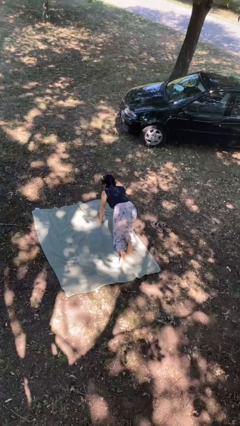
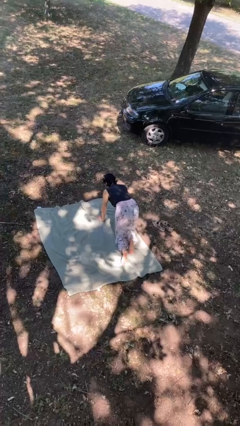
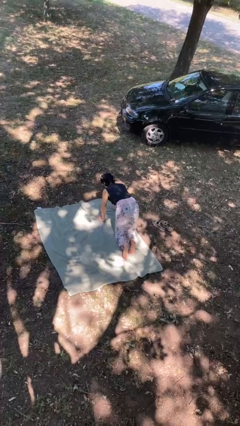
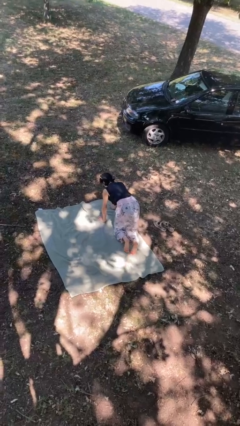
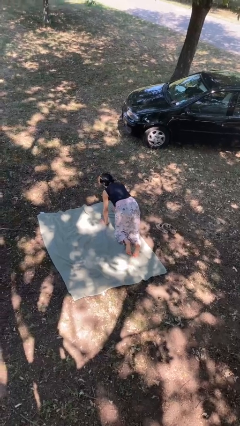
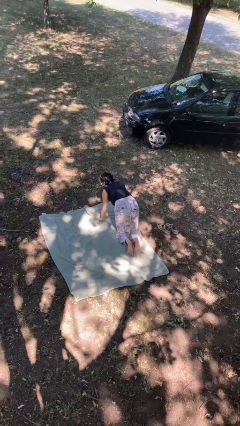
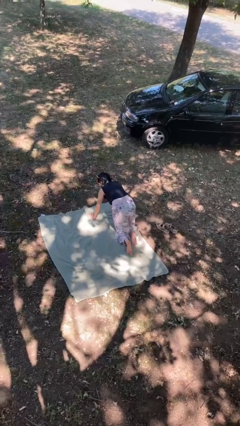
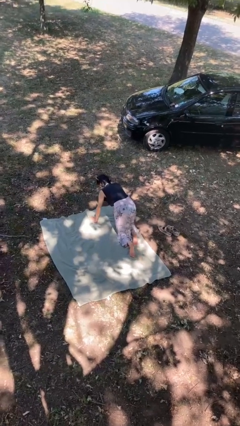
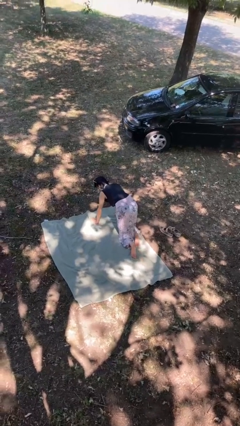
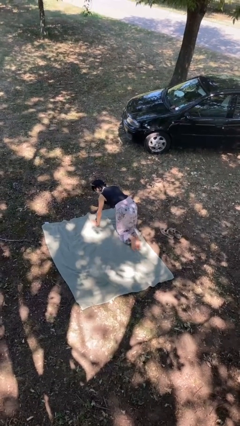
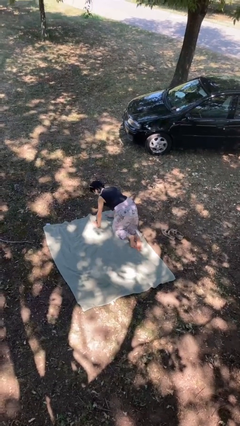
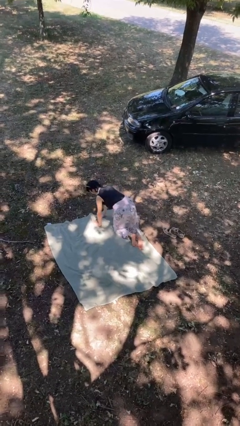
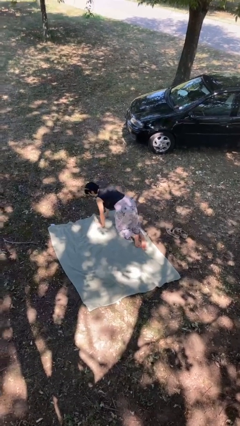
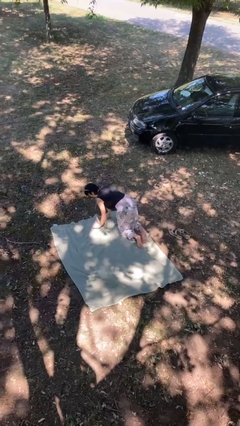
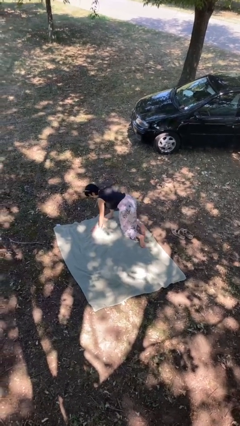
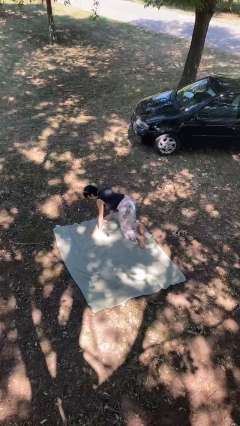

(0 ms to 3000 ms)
person crawls

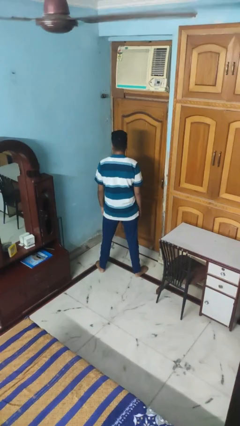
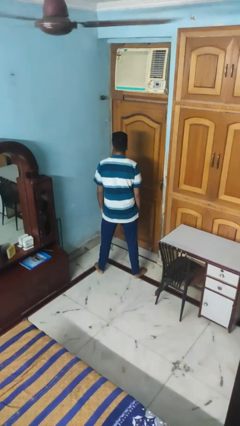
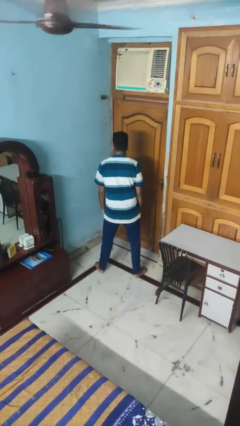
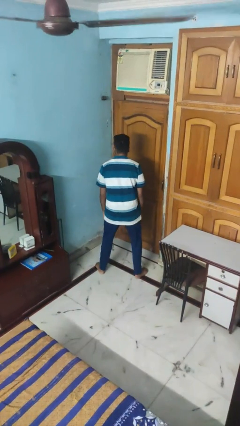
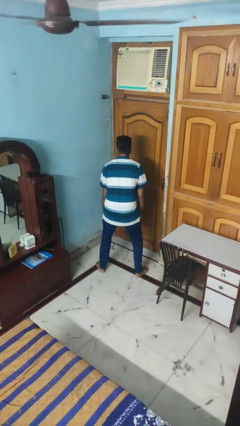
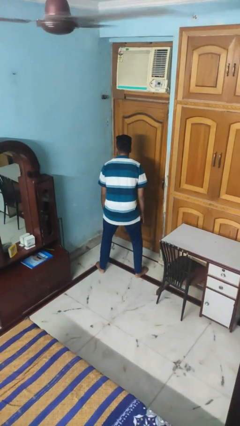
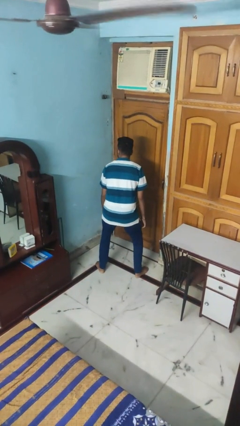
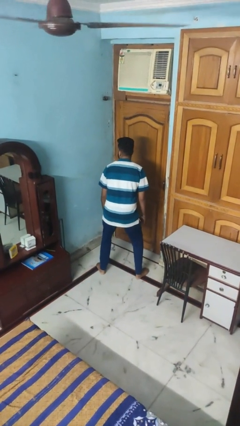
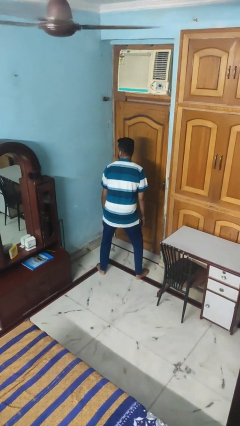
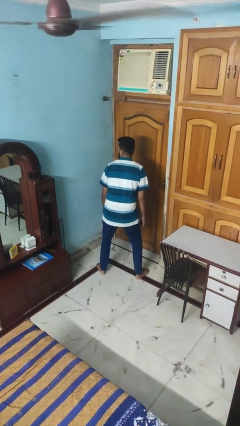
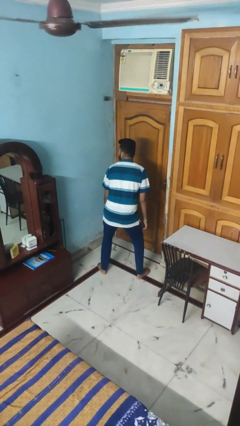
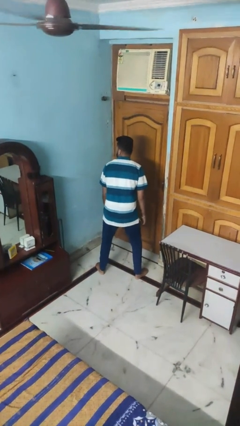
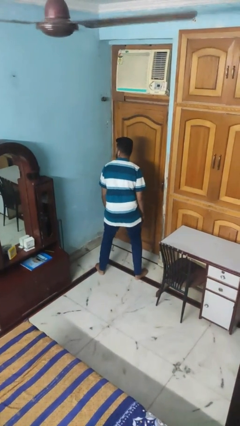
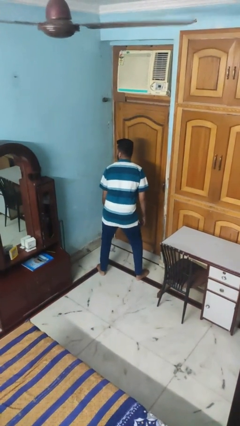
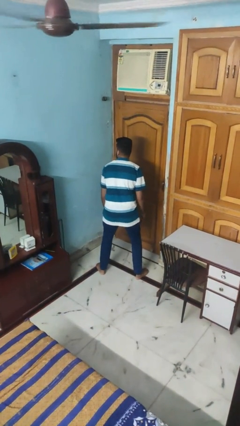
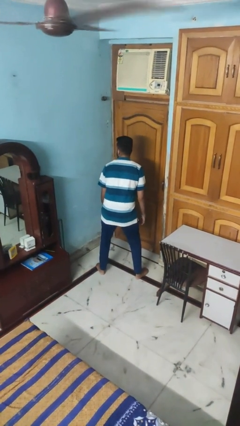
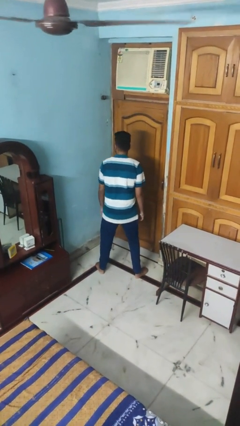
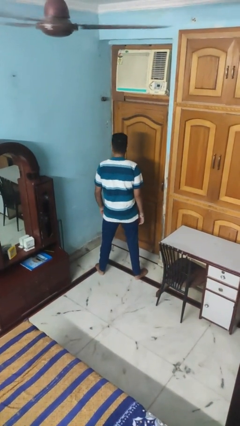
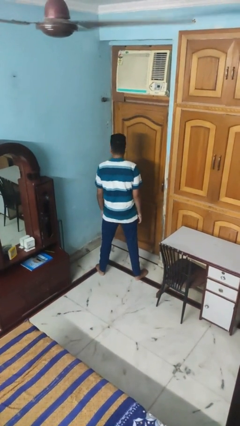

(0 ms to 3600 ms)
person wiggles hips

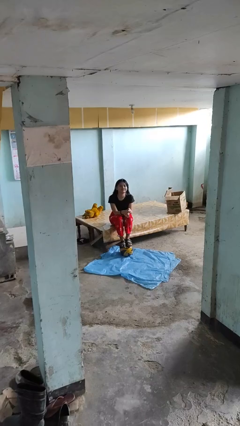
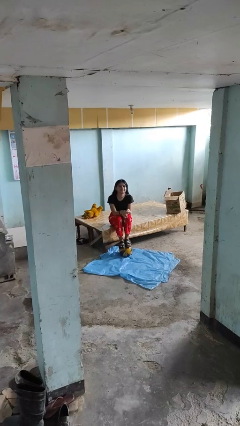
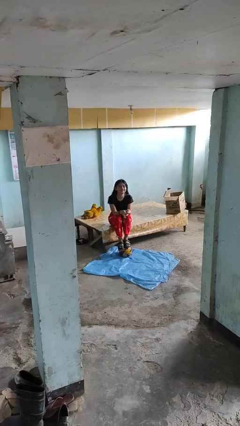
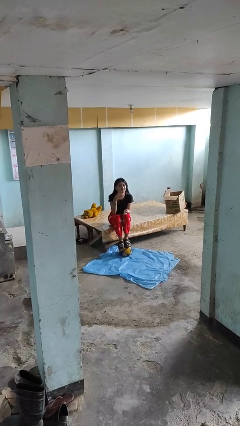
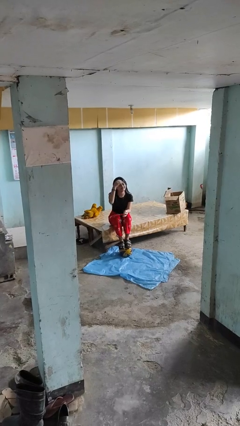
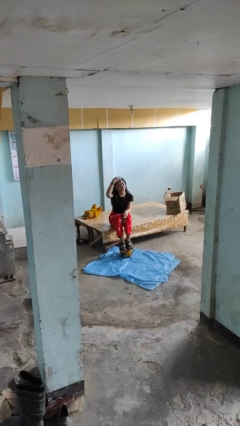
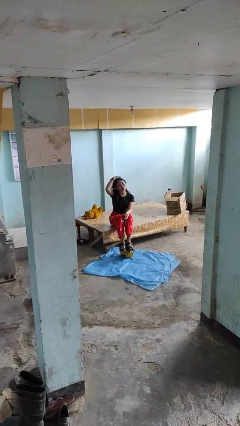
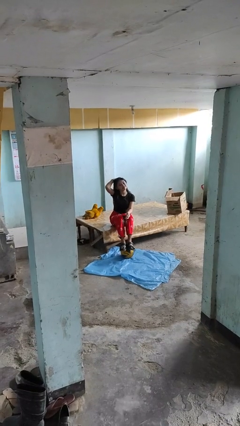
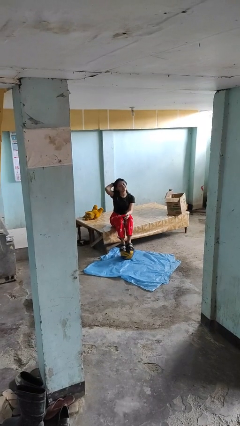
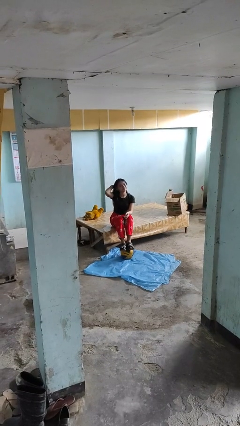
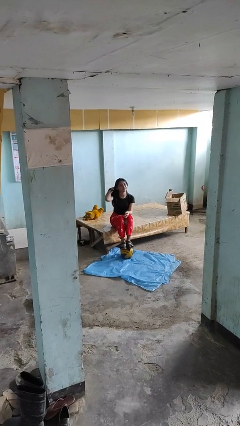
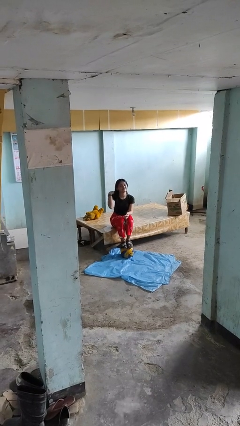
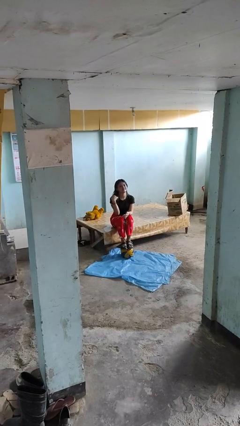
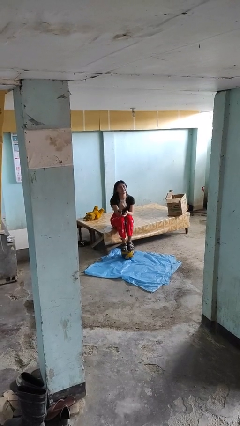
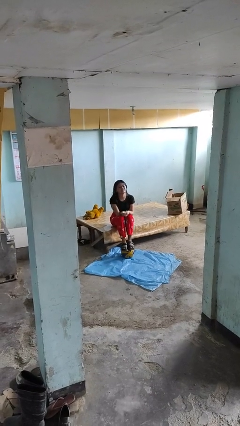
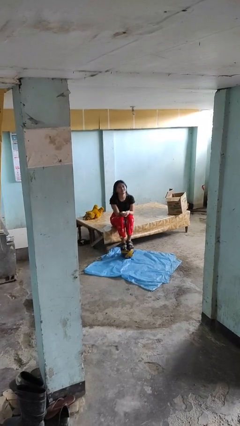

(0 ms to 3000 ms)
person strokes hair

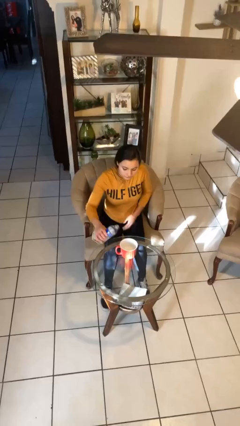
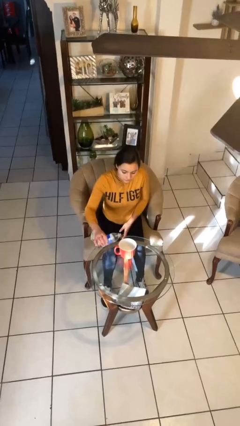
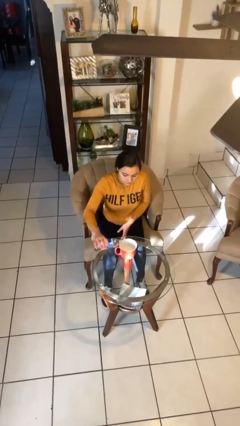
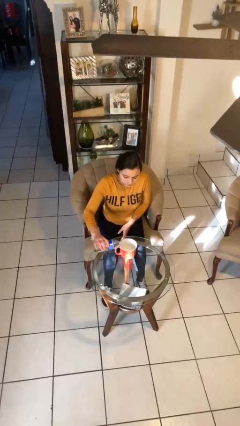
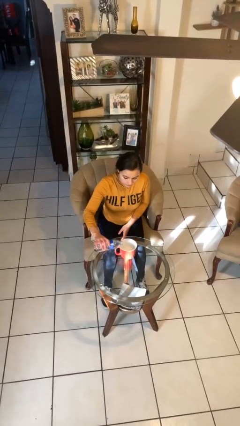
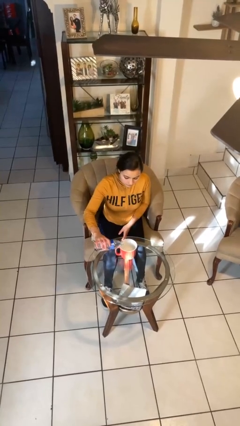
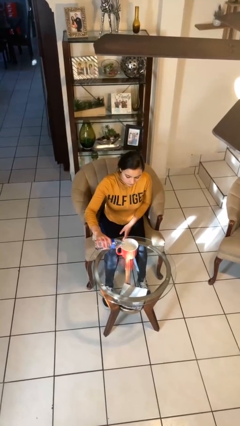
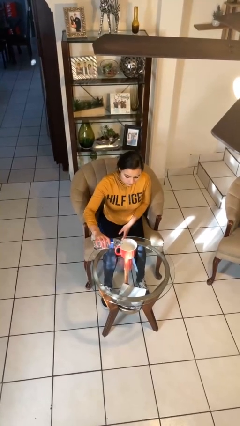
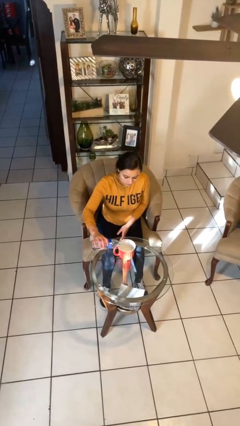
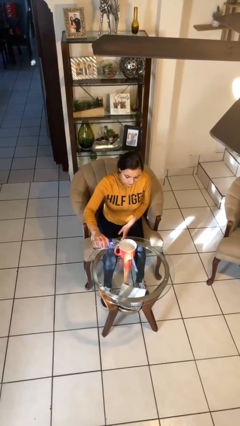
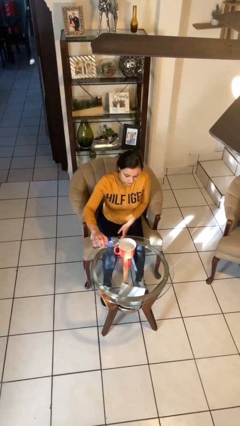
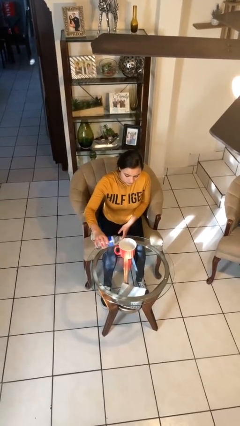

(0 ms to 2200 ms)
person pours liquid into cup

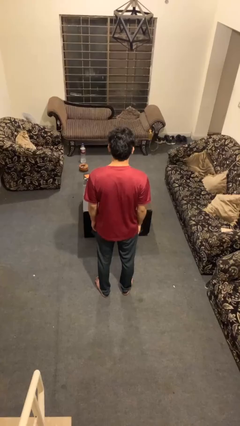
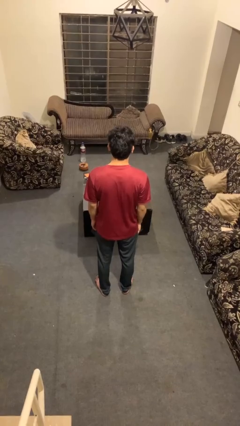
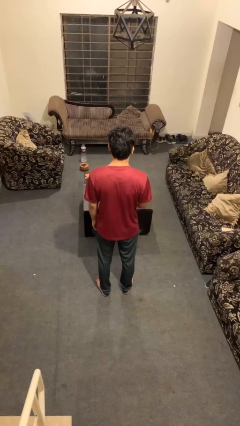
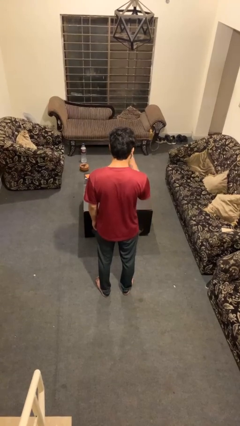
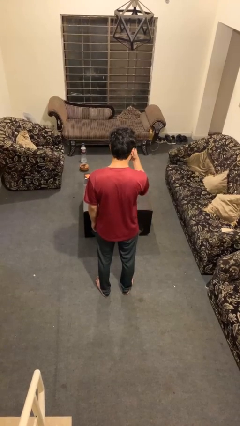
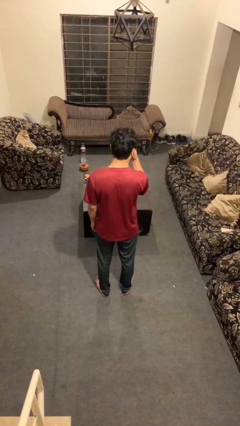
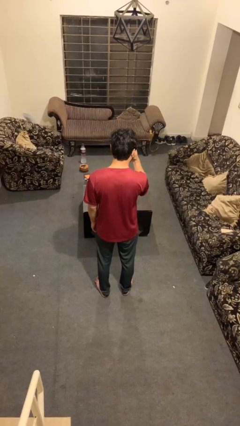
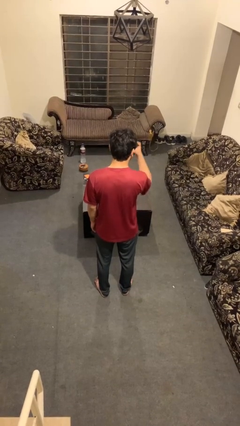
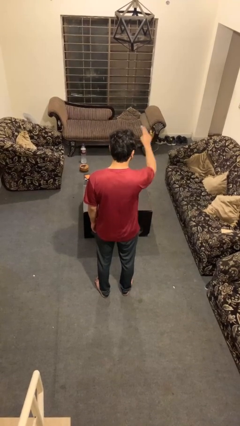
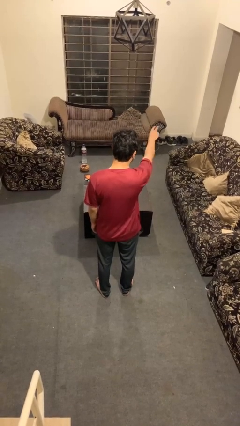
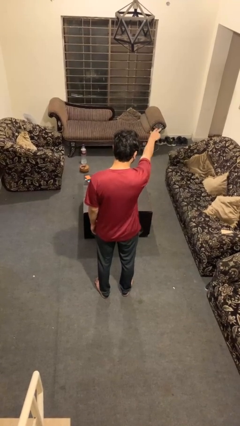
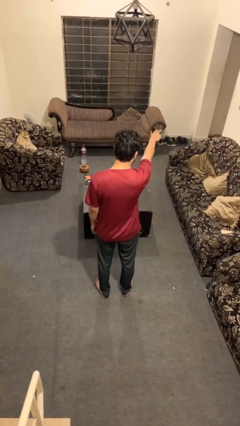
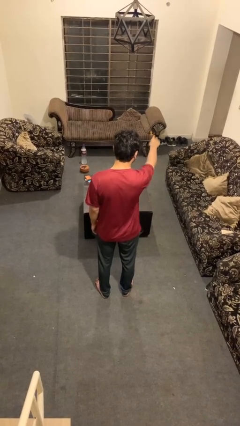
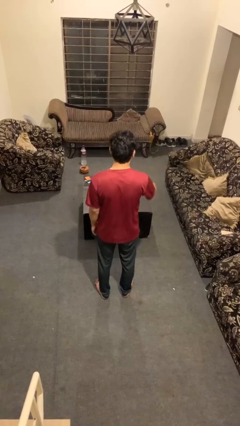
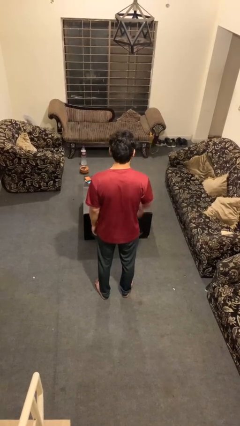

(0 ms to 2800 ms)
person gestures watch closely

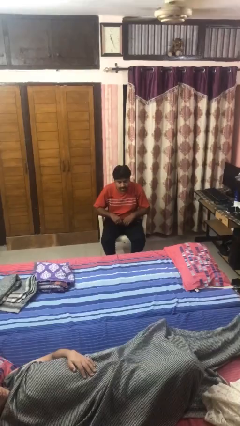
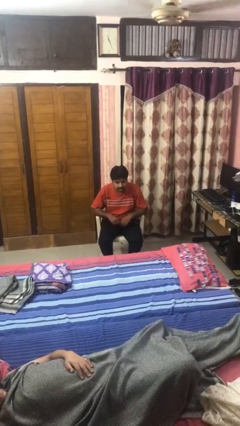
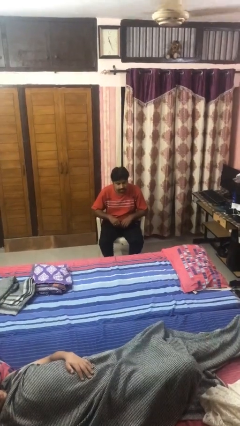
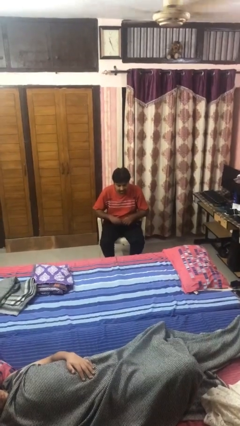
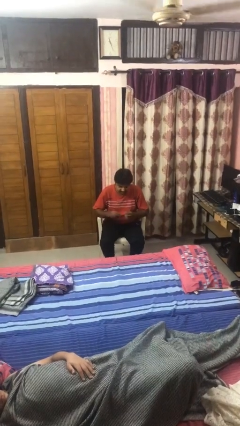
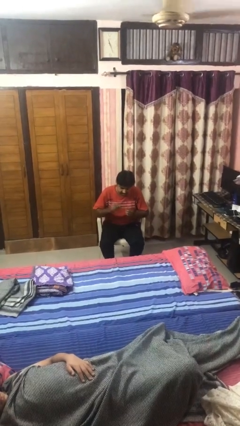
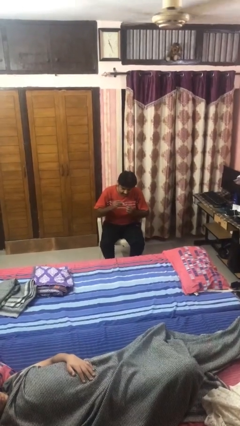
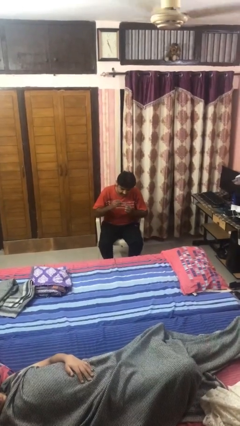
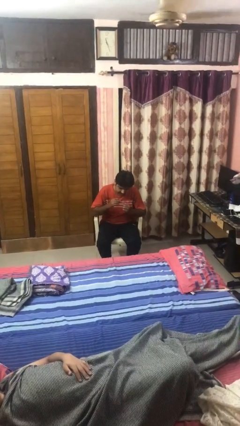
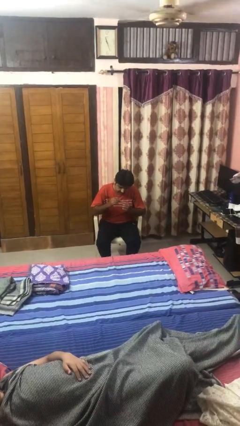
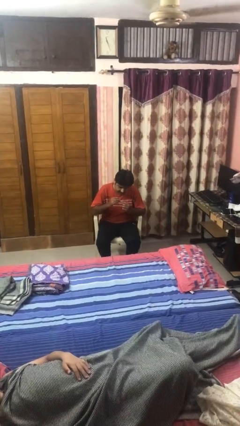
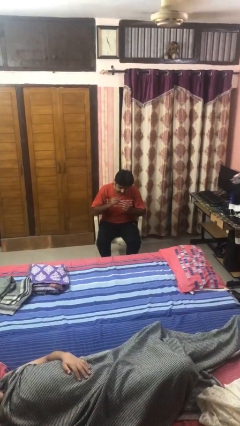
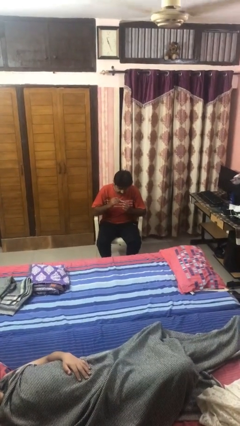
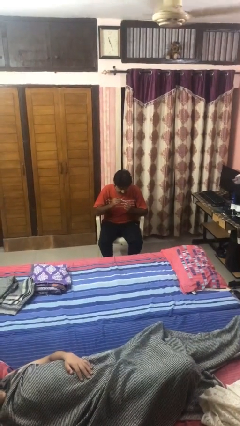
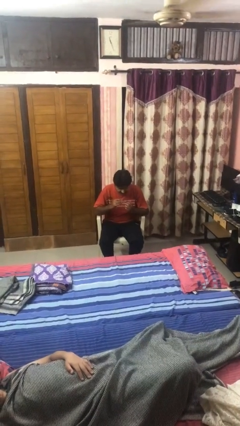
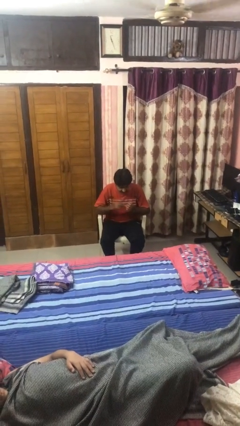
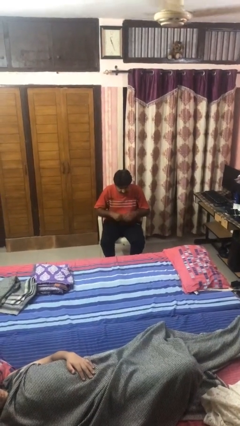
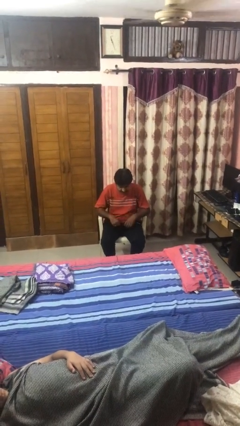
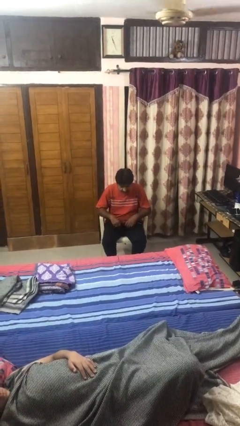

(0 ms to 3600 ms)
person clips fingernails
